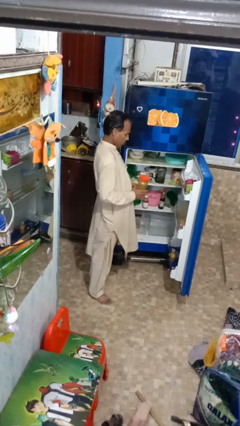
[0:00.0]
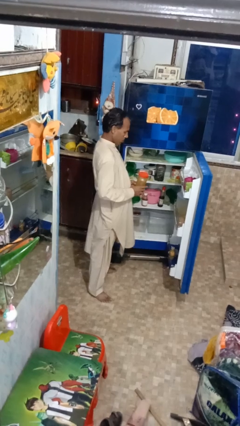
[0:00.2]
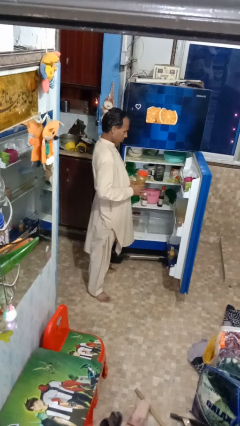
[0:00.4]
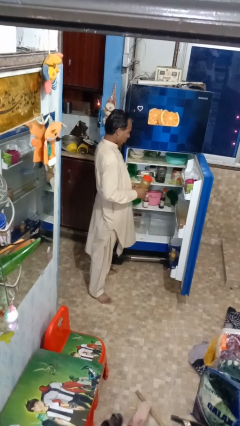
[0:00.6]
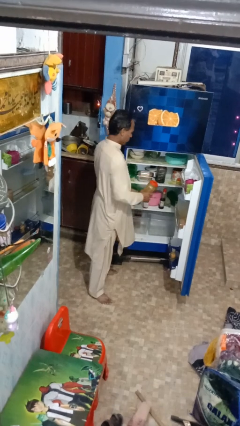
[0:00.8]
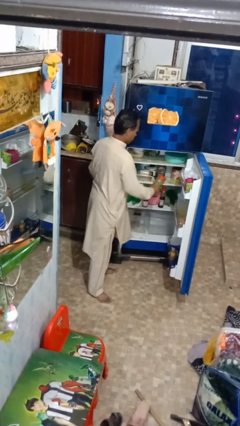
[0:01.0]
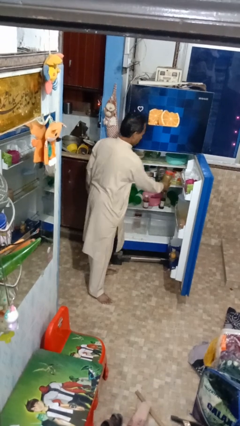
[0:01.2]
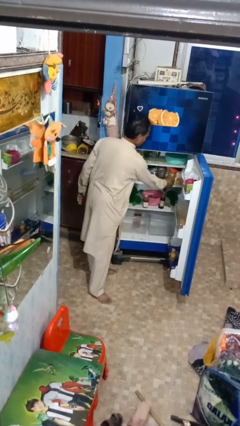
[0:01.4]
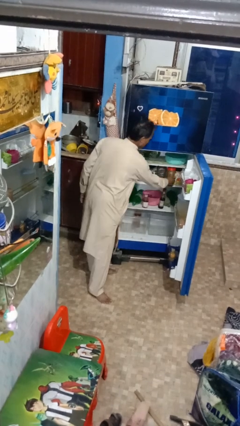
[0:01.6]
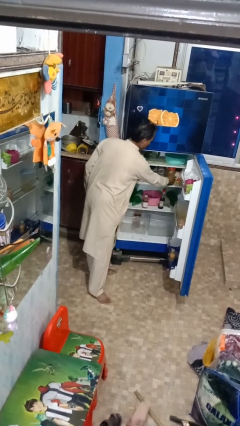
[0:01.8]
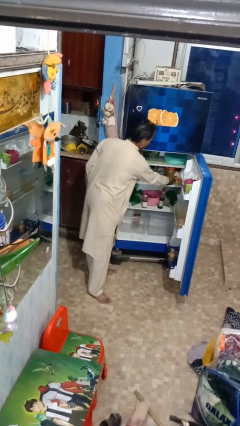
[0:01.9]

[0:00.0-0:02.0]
person takes object from refrigerator

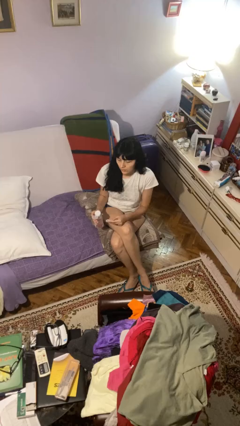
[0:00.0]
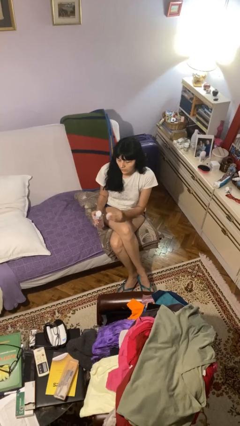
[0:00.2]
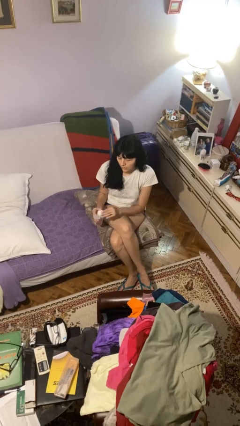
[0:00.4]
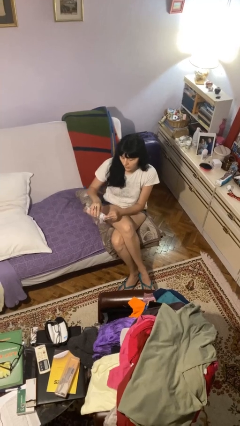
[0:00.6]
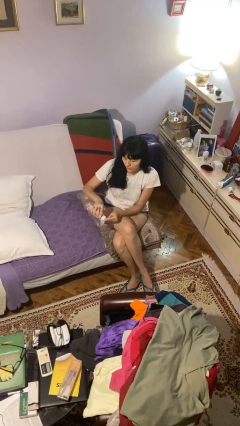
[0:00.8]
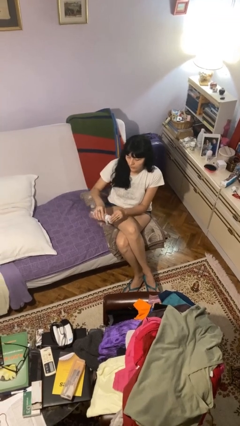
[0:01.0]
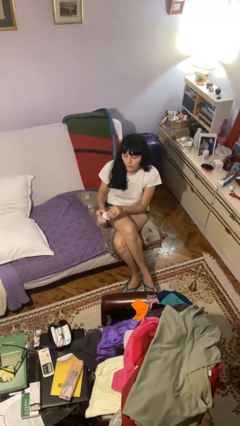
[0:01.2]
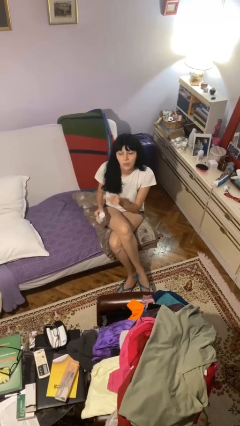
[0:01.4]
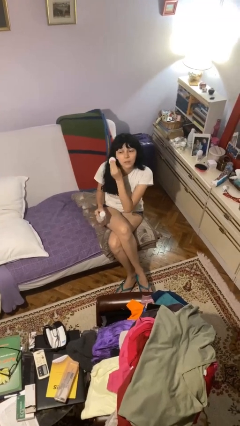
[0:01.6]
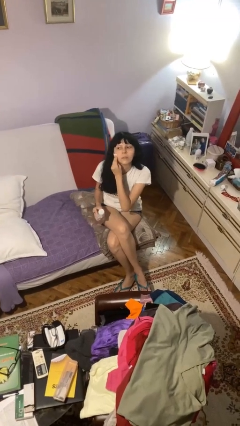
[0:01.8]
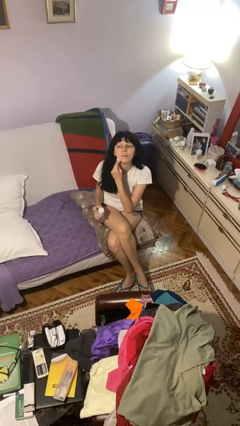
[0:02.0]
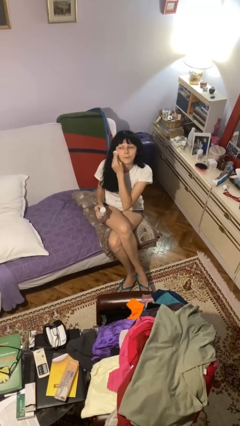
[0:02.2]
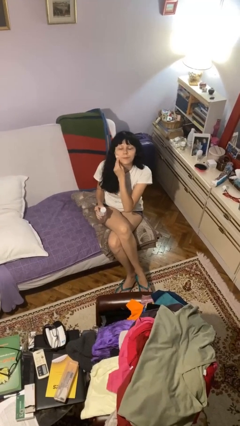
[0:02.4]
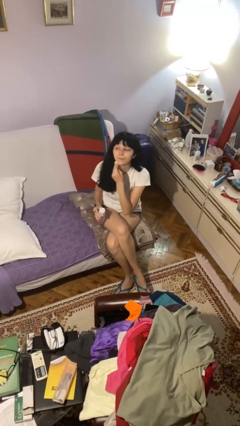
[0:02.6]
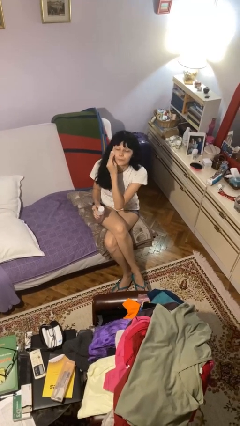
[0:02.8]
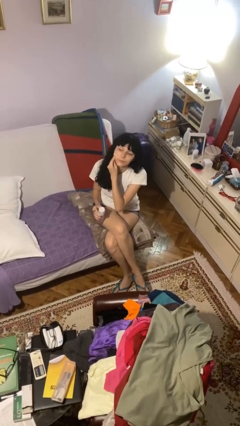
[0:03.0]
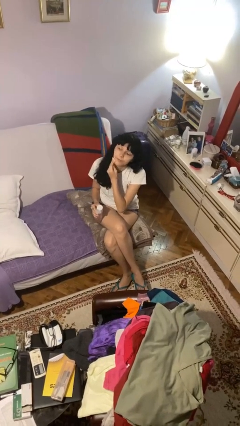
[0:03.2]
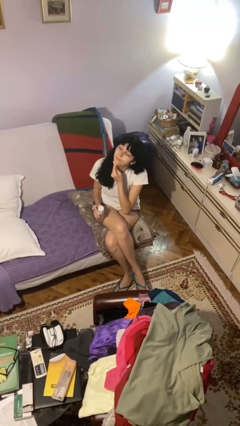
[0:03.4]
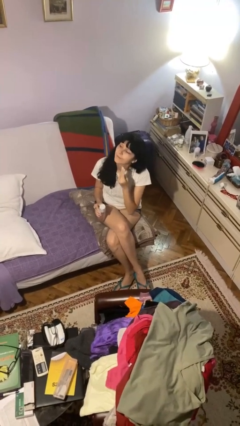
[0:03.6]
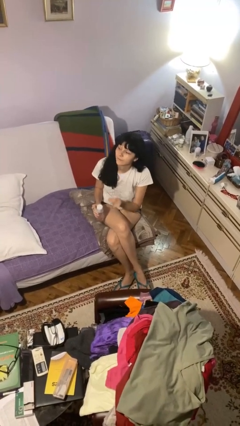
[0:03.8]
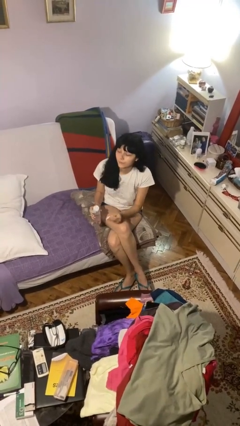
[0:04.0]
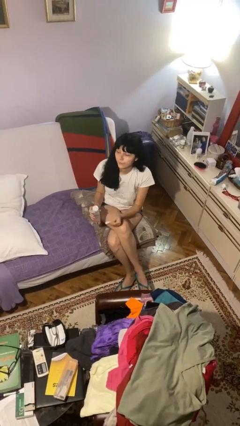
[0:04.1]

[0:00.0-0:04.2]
person applies facial moisturizer

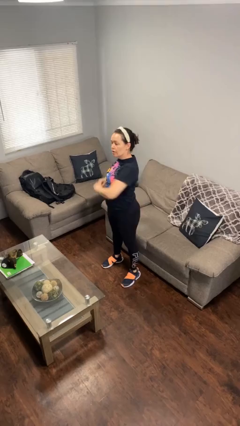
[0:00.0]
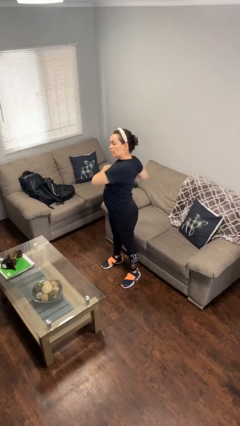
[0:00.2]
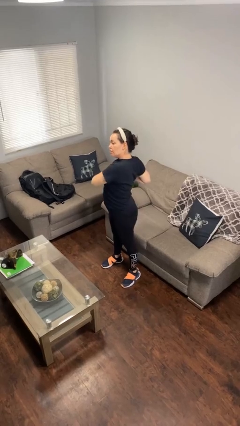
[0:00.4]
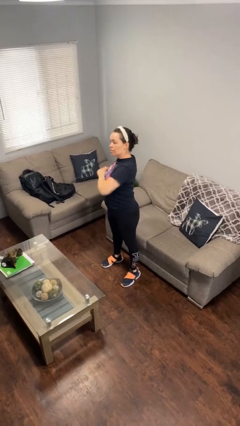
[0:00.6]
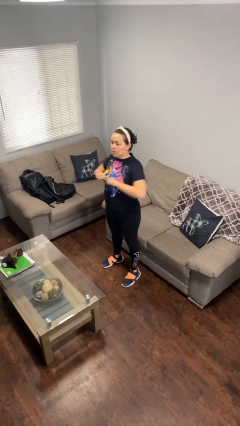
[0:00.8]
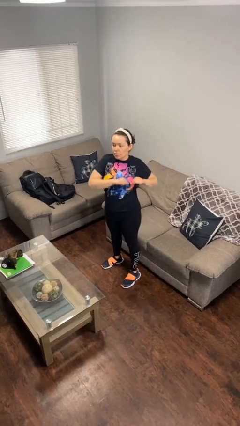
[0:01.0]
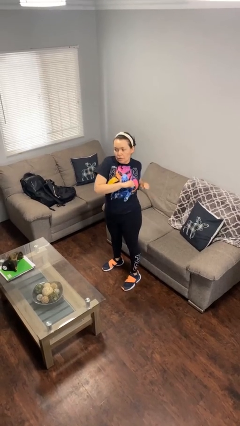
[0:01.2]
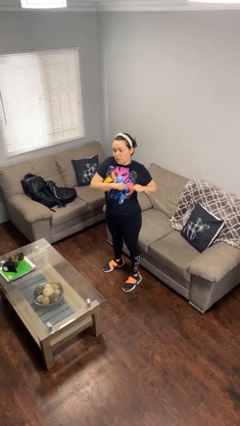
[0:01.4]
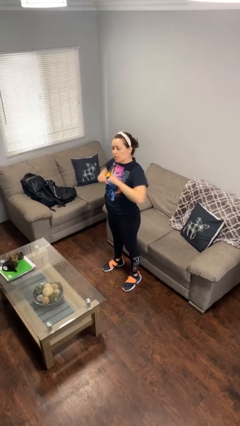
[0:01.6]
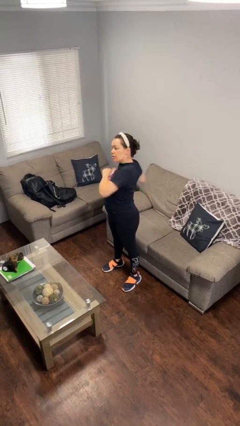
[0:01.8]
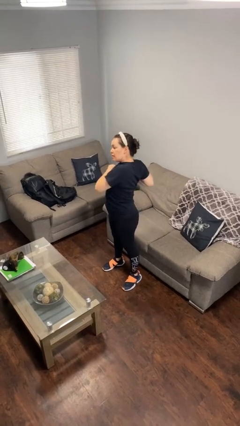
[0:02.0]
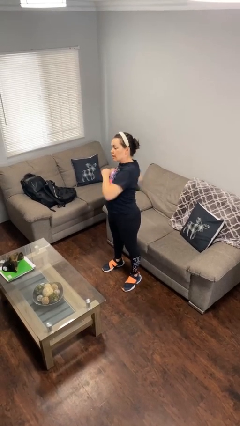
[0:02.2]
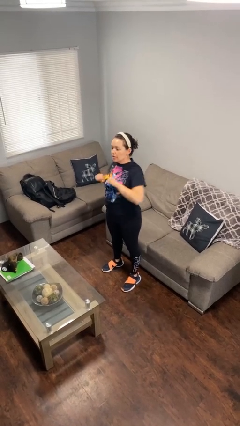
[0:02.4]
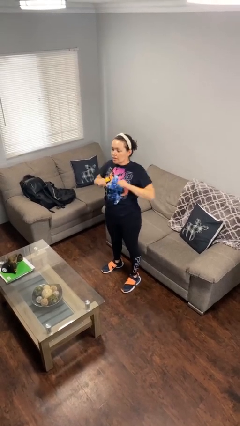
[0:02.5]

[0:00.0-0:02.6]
person stretches arms to side

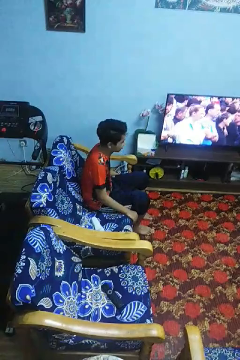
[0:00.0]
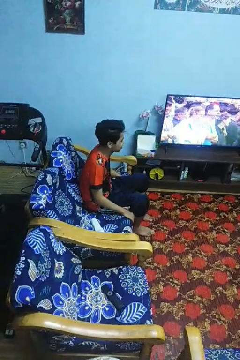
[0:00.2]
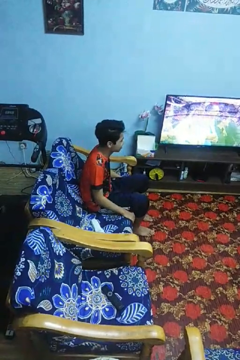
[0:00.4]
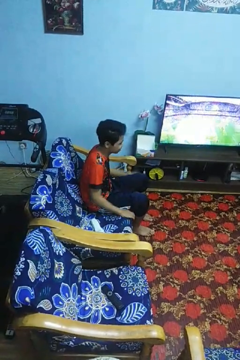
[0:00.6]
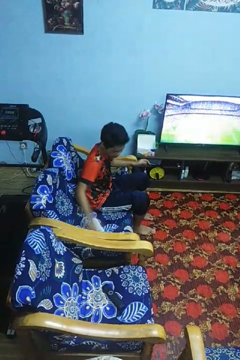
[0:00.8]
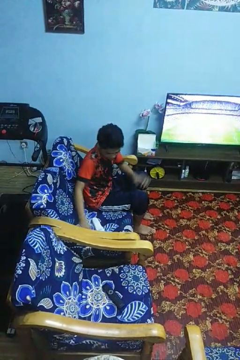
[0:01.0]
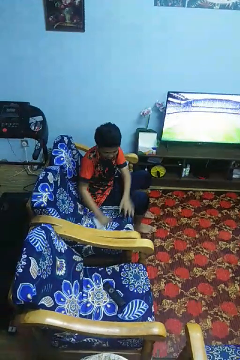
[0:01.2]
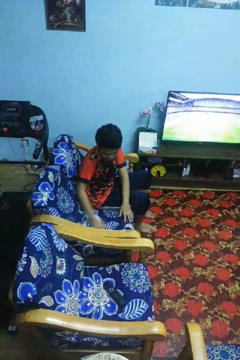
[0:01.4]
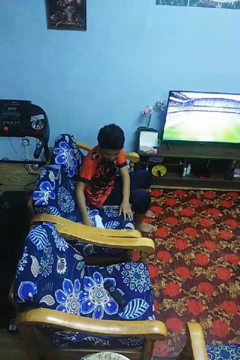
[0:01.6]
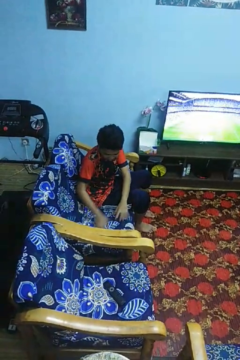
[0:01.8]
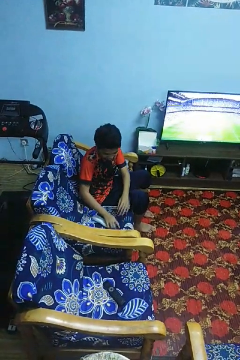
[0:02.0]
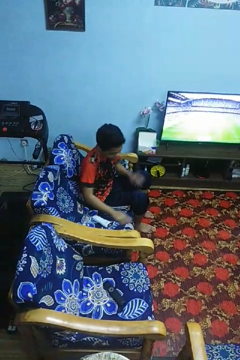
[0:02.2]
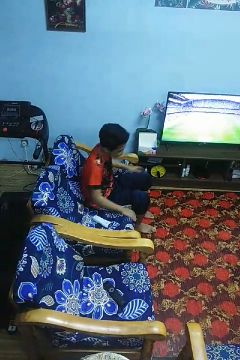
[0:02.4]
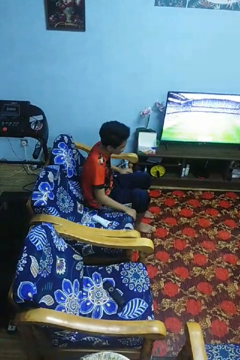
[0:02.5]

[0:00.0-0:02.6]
person searches in couch

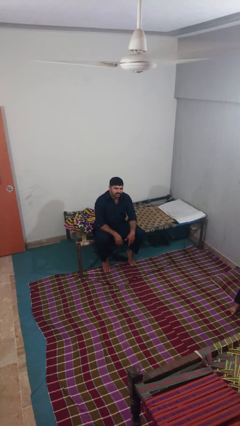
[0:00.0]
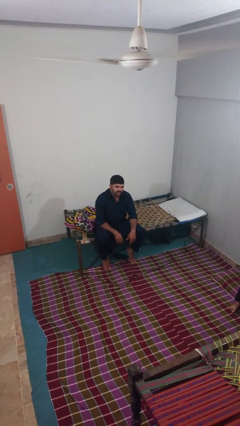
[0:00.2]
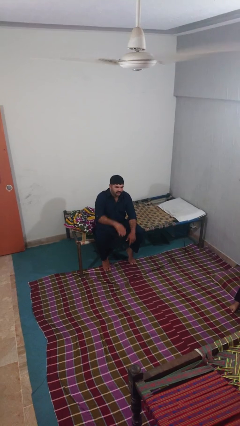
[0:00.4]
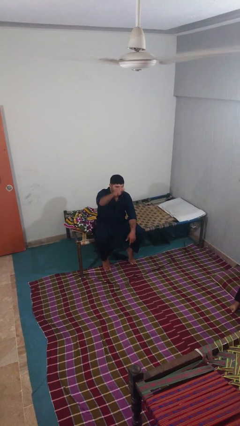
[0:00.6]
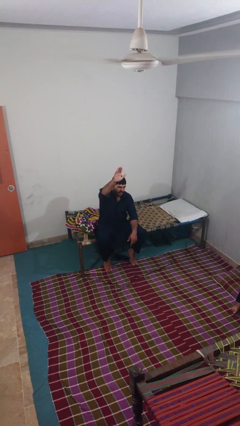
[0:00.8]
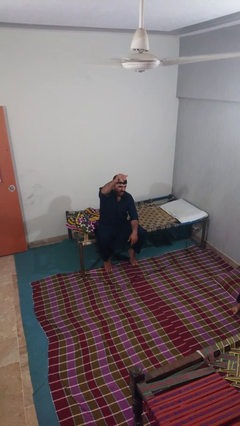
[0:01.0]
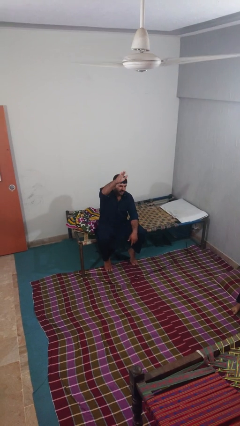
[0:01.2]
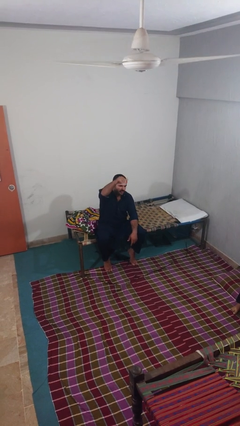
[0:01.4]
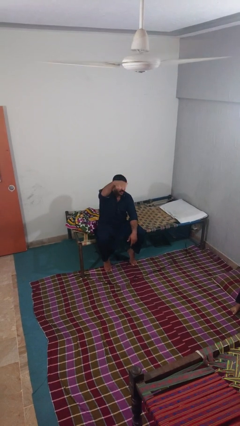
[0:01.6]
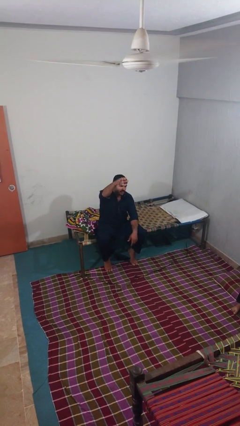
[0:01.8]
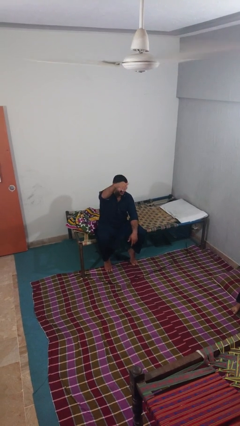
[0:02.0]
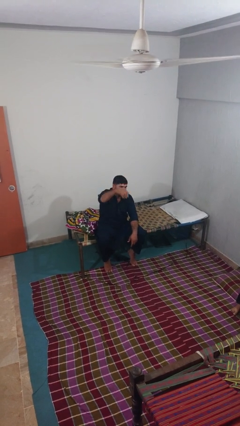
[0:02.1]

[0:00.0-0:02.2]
person gestures come here

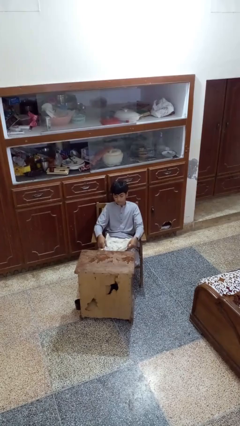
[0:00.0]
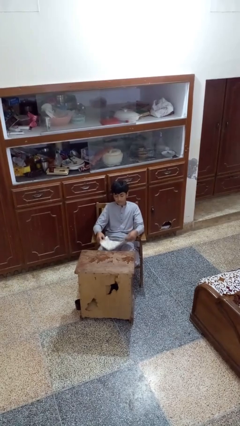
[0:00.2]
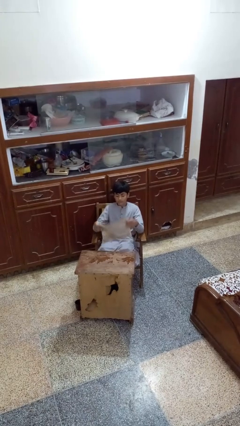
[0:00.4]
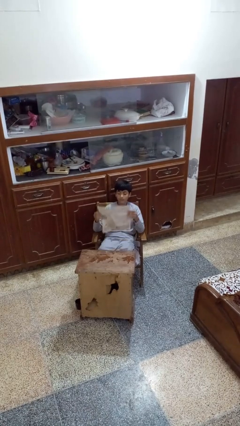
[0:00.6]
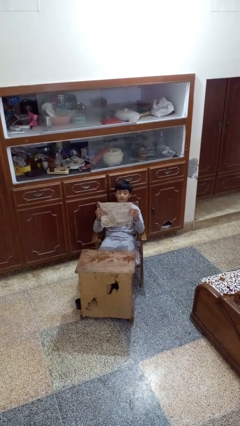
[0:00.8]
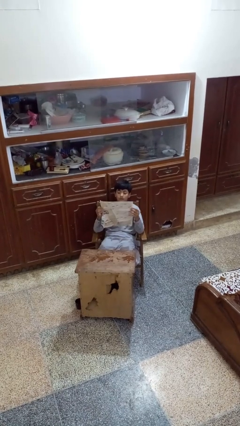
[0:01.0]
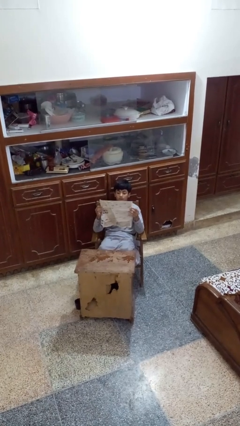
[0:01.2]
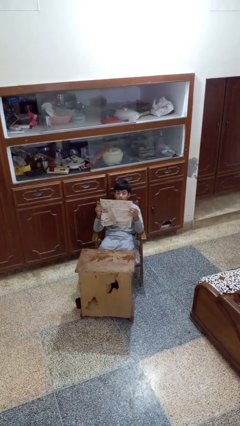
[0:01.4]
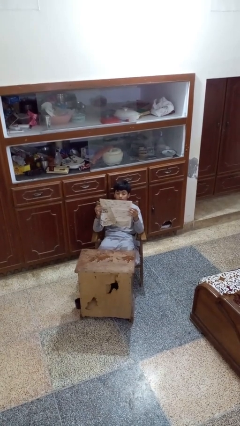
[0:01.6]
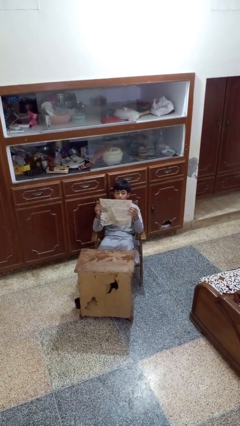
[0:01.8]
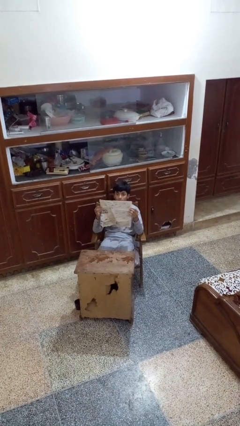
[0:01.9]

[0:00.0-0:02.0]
person reads newspaper

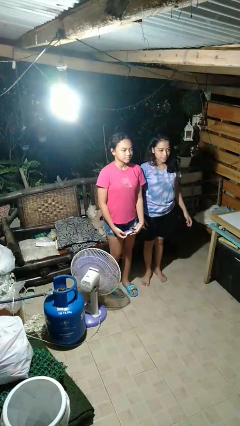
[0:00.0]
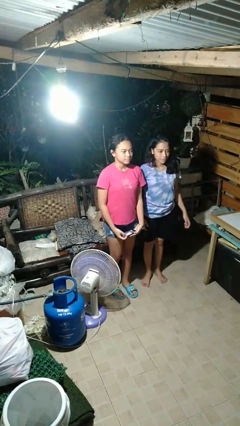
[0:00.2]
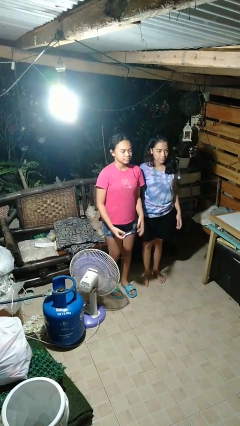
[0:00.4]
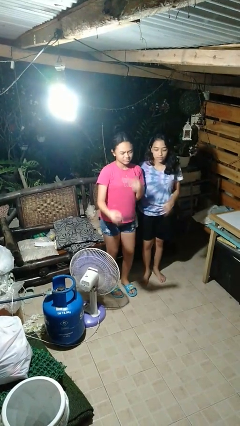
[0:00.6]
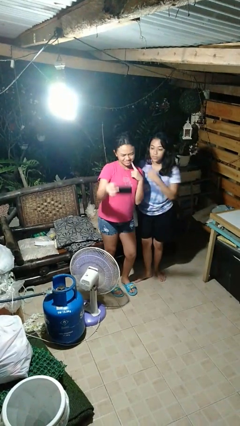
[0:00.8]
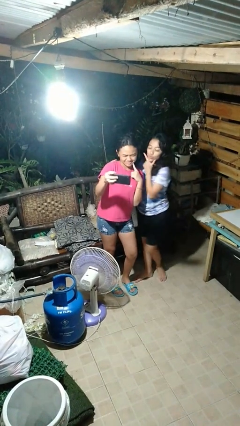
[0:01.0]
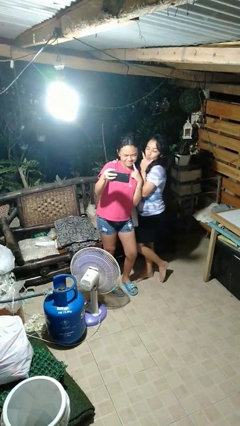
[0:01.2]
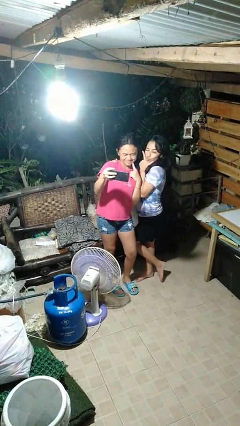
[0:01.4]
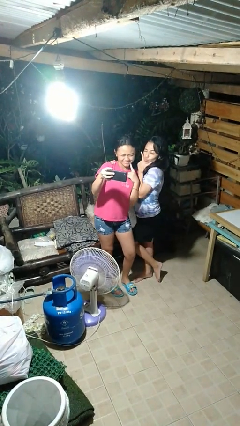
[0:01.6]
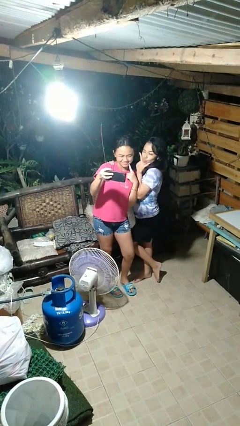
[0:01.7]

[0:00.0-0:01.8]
person takes selfie with person
